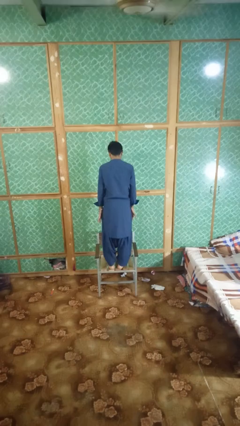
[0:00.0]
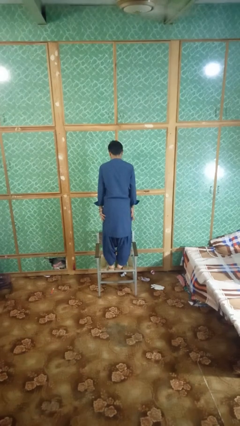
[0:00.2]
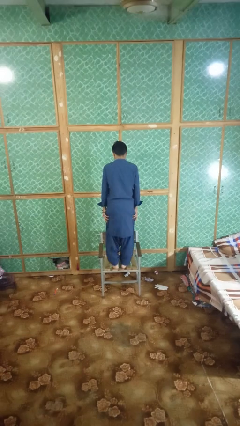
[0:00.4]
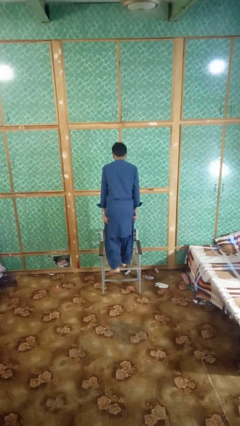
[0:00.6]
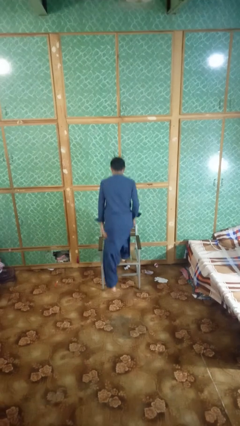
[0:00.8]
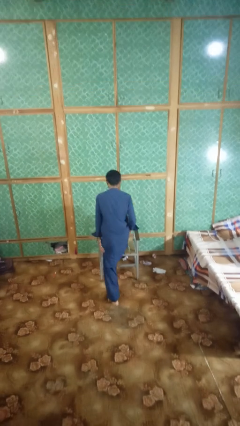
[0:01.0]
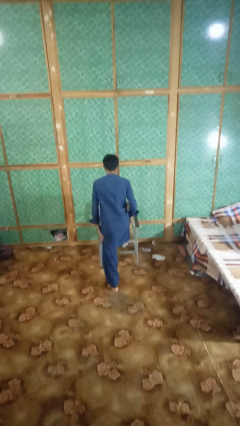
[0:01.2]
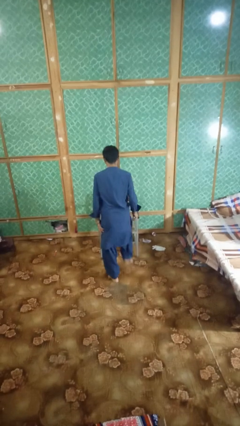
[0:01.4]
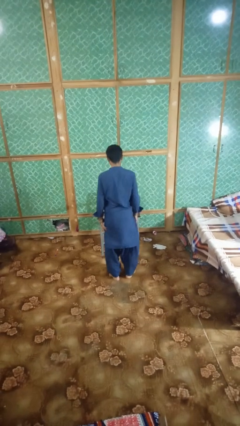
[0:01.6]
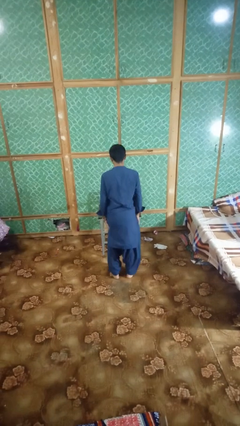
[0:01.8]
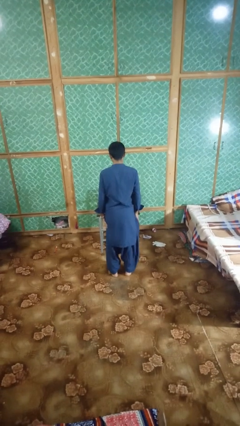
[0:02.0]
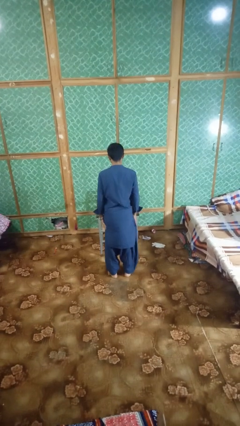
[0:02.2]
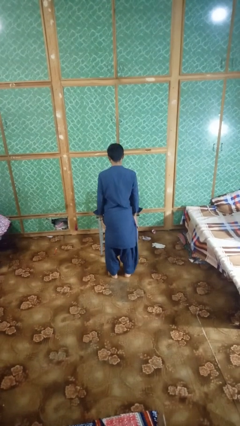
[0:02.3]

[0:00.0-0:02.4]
person climbs off chair

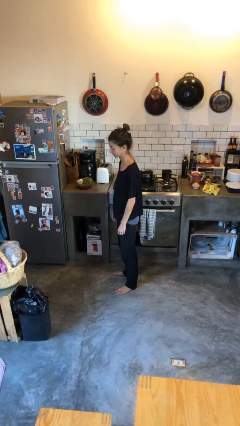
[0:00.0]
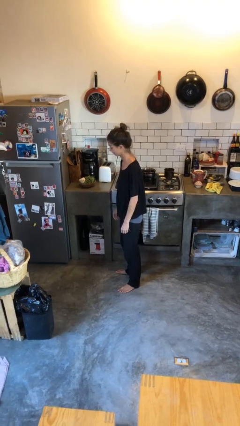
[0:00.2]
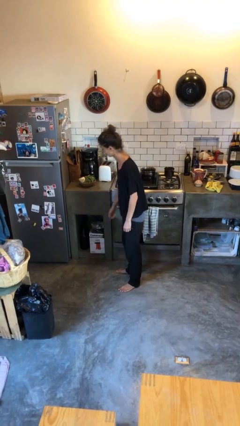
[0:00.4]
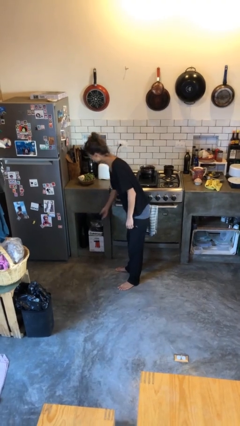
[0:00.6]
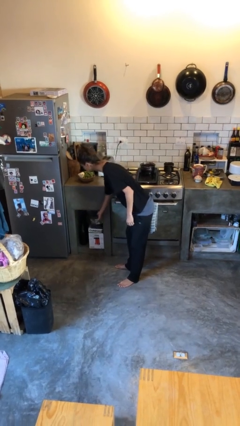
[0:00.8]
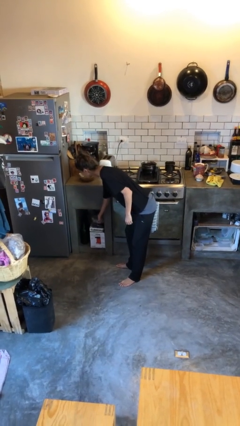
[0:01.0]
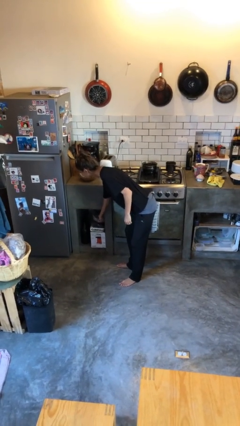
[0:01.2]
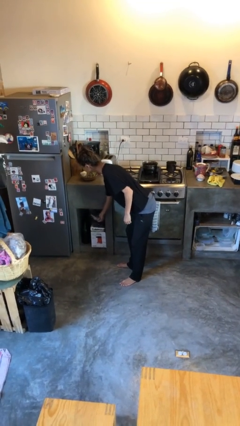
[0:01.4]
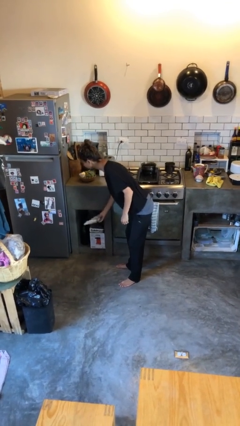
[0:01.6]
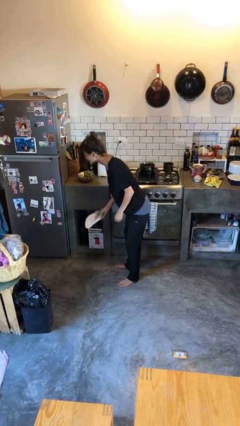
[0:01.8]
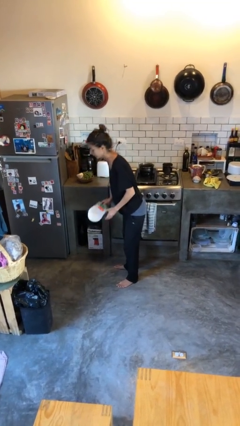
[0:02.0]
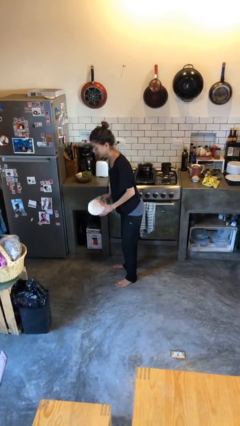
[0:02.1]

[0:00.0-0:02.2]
person picks up object from cabinet

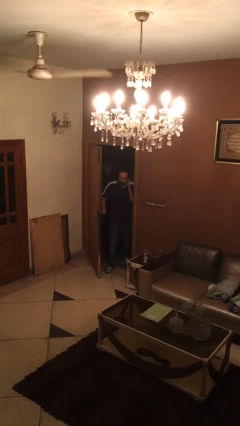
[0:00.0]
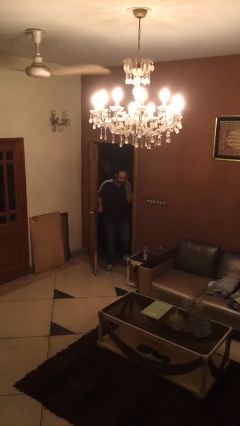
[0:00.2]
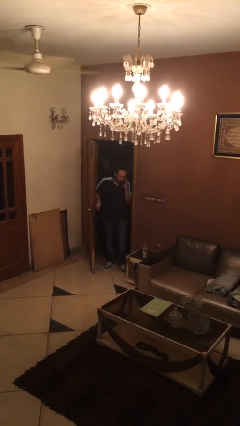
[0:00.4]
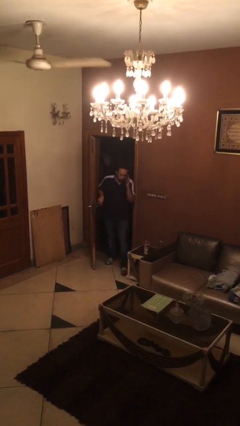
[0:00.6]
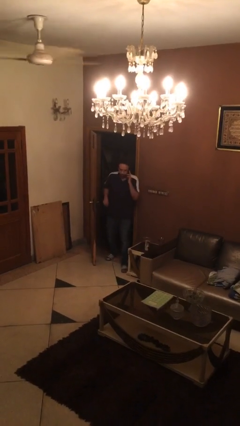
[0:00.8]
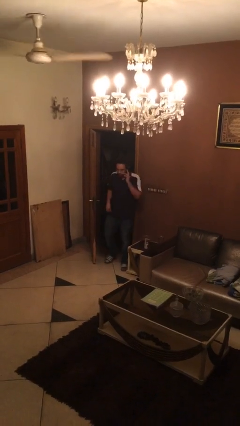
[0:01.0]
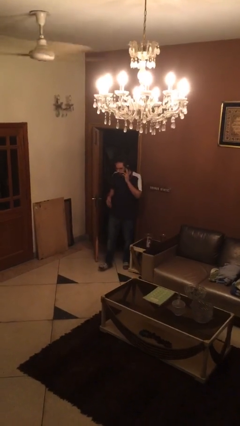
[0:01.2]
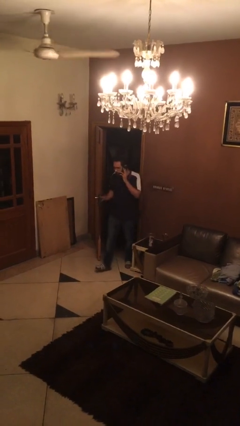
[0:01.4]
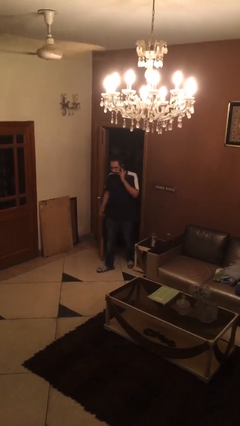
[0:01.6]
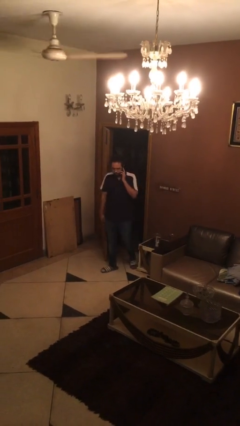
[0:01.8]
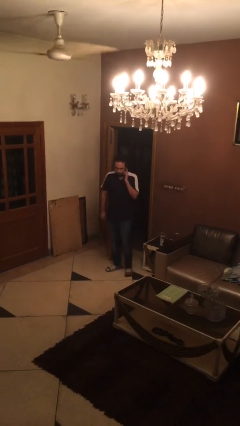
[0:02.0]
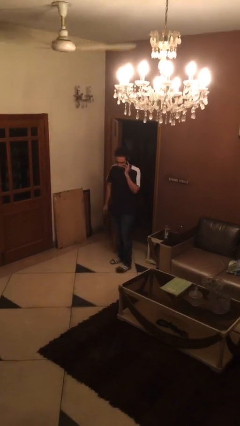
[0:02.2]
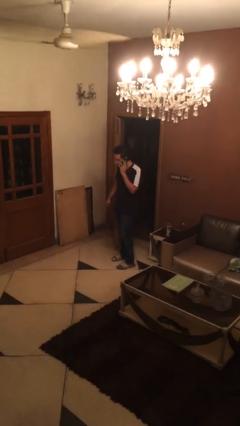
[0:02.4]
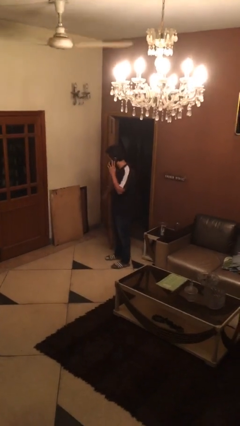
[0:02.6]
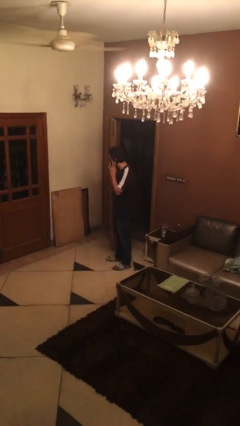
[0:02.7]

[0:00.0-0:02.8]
person enters scene through structure

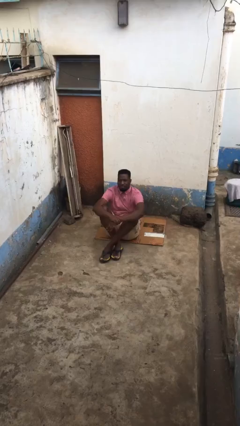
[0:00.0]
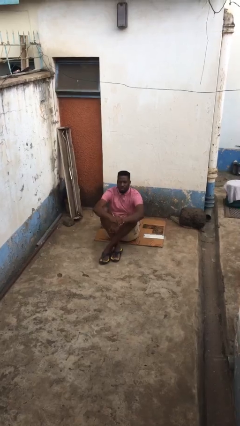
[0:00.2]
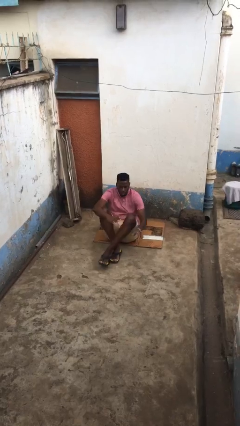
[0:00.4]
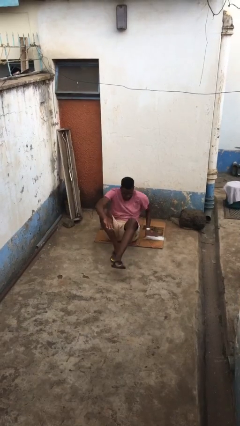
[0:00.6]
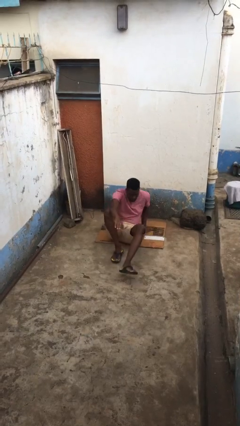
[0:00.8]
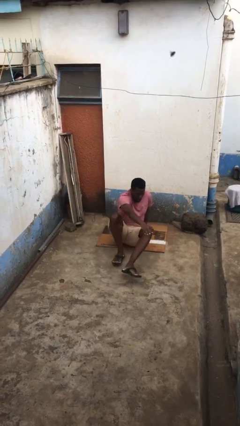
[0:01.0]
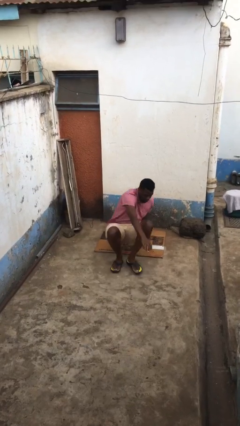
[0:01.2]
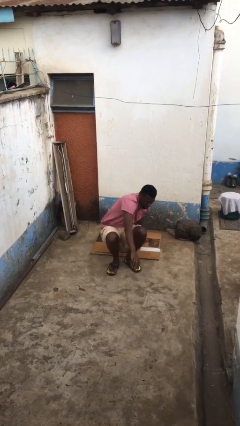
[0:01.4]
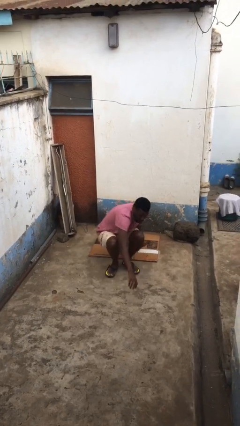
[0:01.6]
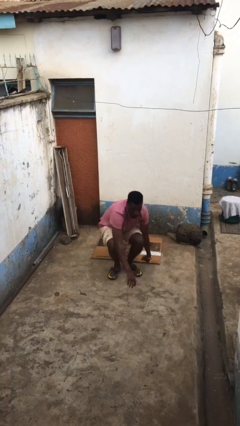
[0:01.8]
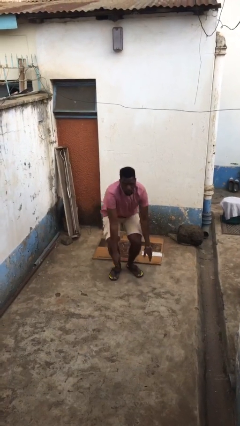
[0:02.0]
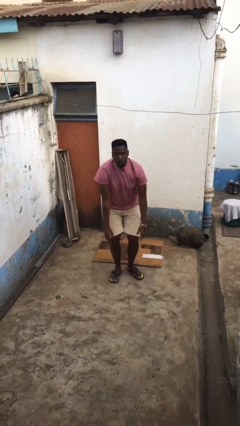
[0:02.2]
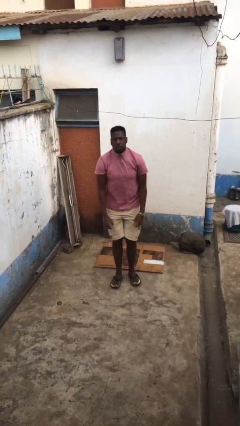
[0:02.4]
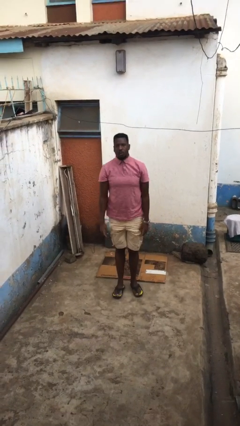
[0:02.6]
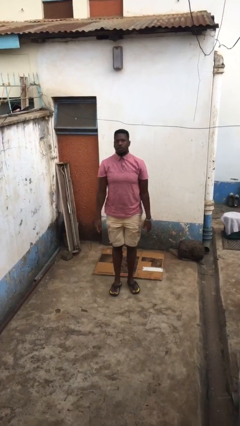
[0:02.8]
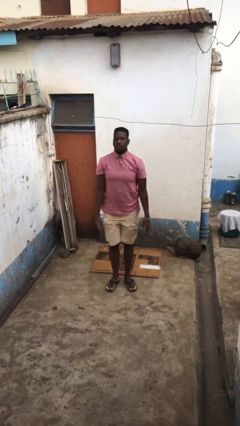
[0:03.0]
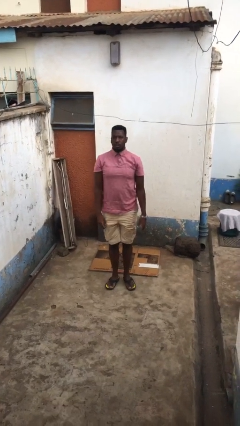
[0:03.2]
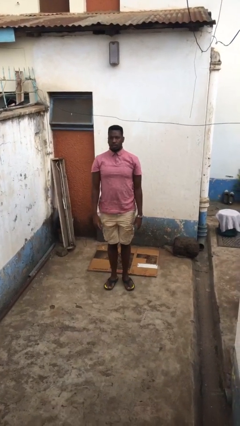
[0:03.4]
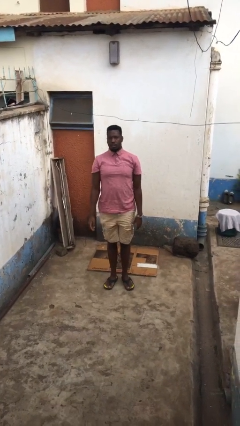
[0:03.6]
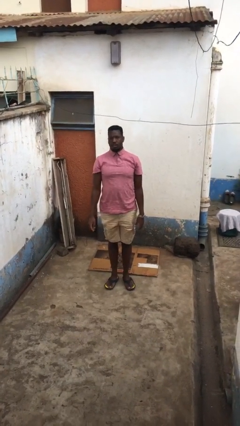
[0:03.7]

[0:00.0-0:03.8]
person stands up from floor

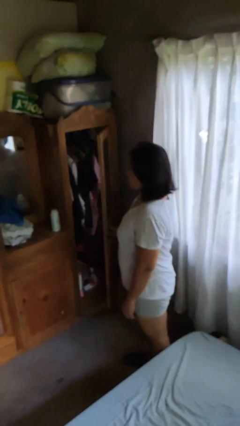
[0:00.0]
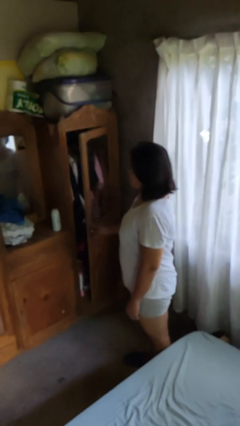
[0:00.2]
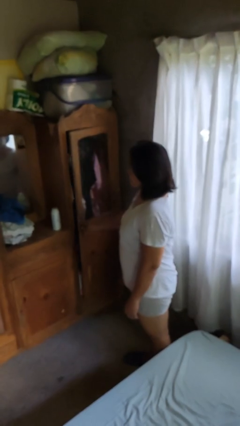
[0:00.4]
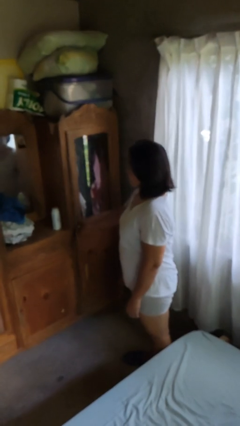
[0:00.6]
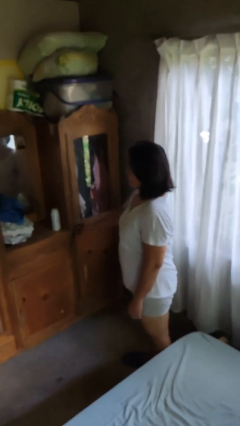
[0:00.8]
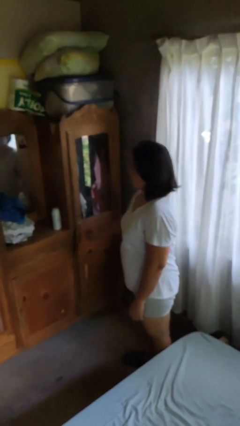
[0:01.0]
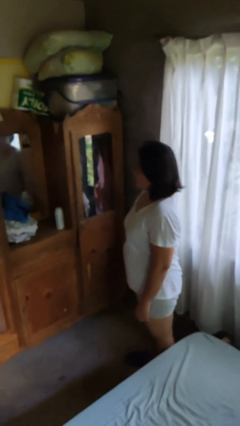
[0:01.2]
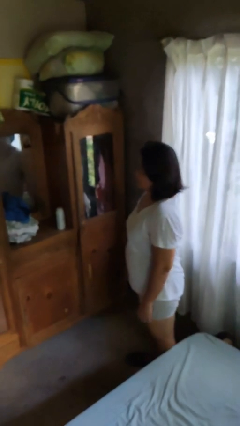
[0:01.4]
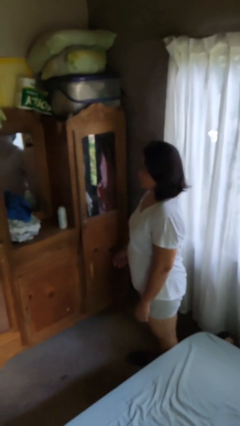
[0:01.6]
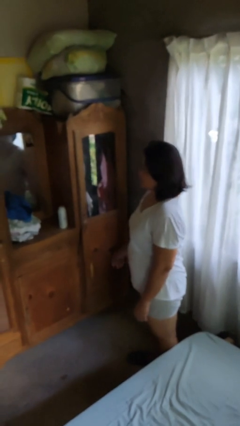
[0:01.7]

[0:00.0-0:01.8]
person closes dresser drawer

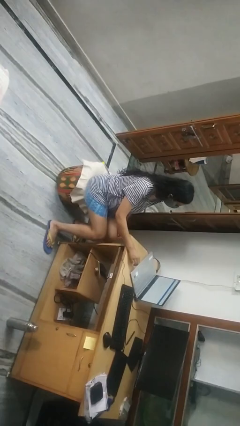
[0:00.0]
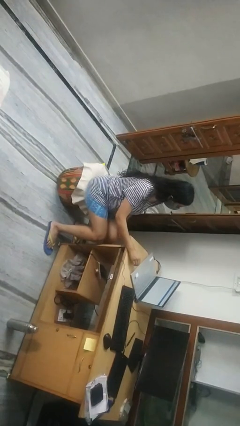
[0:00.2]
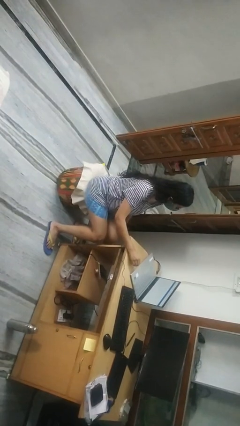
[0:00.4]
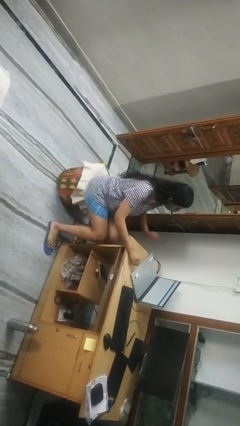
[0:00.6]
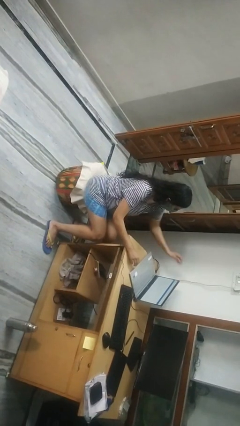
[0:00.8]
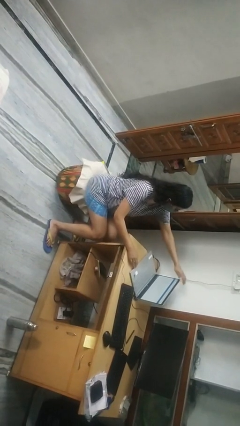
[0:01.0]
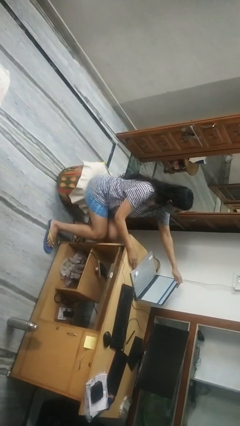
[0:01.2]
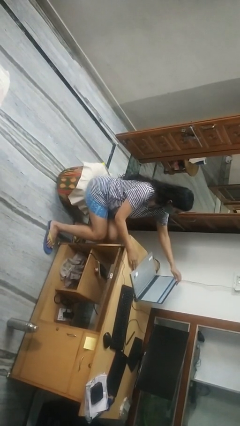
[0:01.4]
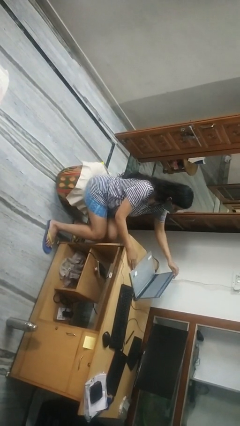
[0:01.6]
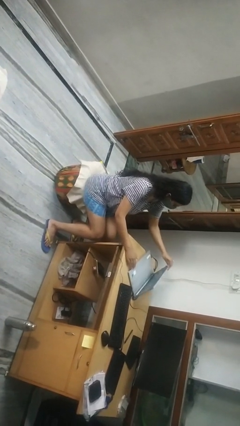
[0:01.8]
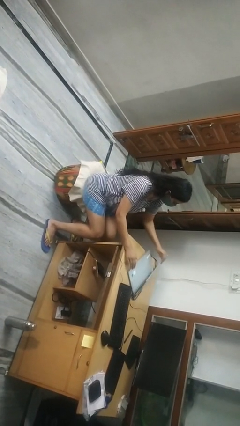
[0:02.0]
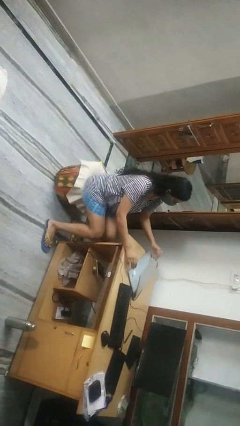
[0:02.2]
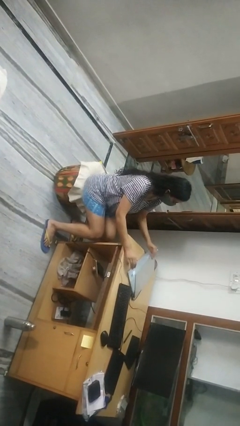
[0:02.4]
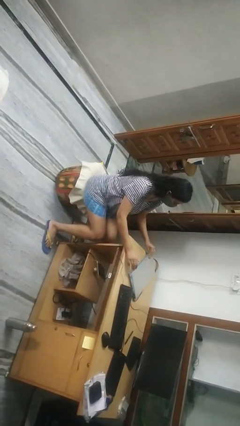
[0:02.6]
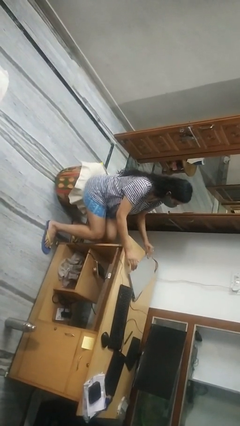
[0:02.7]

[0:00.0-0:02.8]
person closes laptop

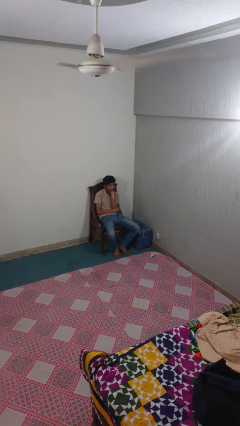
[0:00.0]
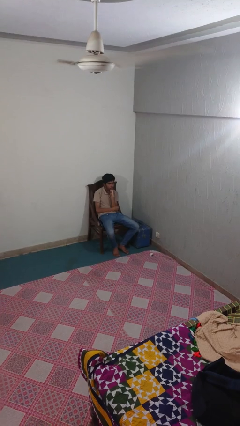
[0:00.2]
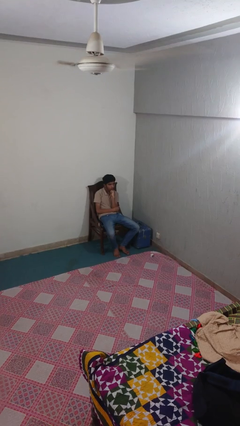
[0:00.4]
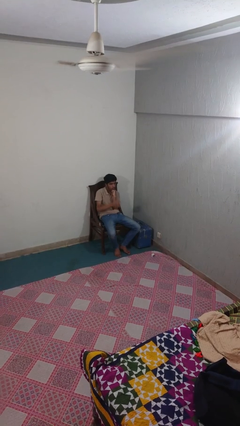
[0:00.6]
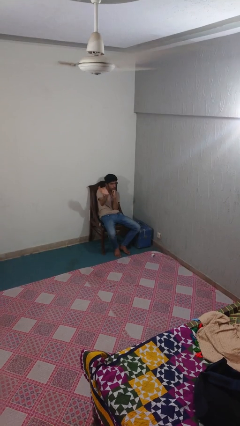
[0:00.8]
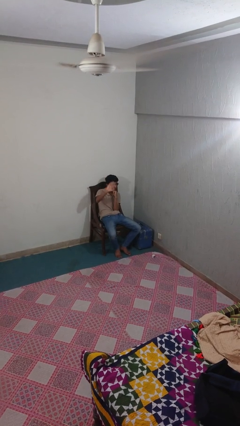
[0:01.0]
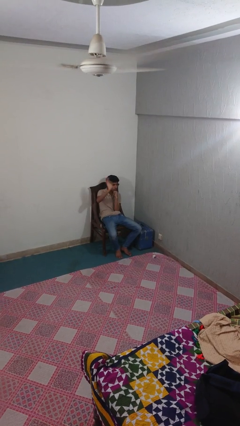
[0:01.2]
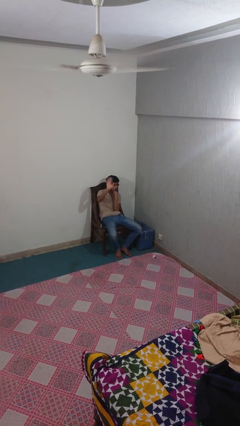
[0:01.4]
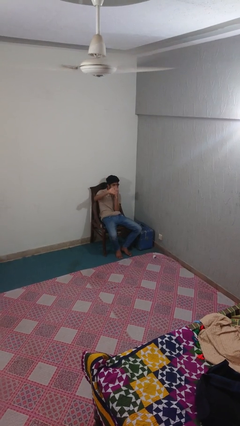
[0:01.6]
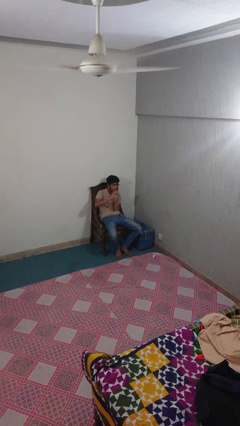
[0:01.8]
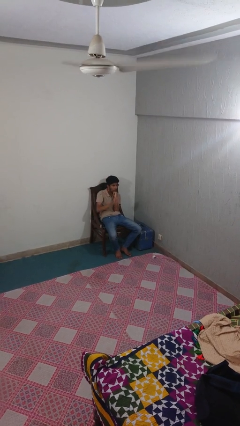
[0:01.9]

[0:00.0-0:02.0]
person waves at person
